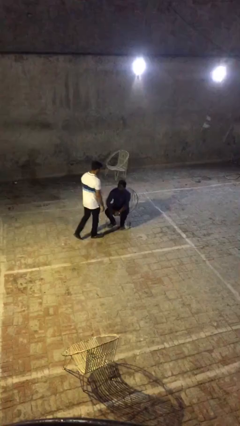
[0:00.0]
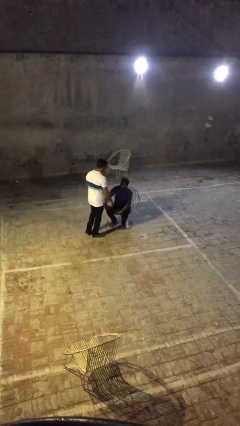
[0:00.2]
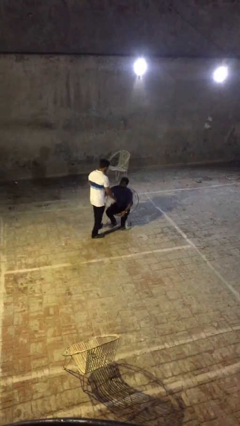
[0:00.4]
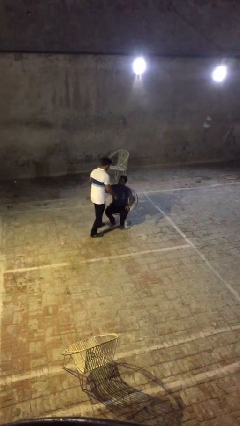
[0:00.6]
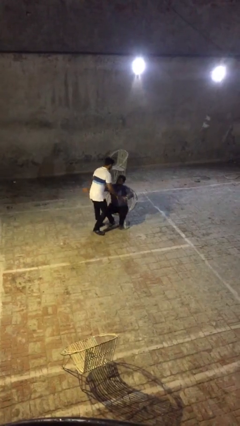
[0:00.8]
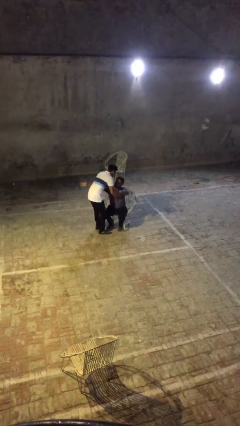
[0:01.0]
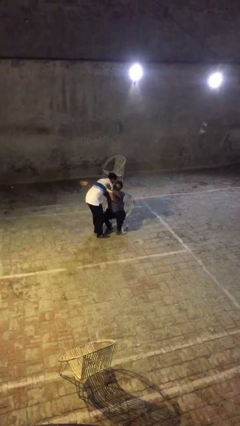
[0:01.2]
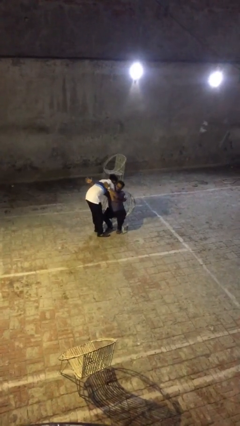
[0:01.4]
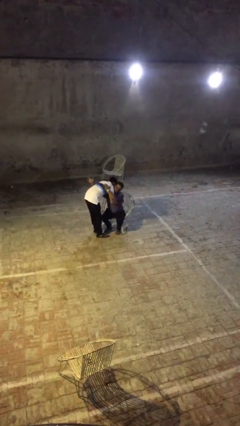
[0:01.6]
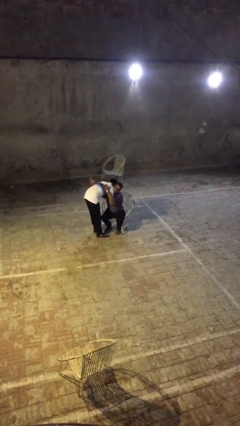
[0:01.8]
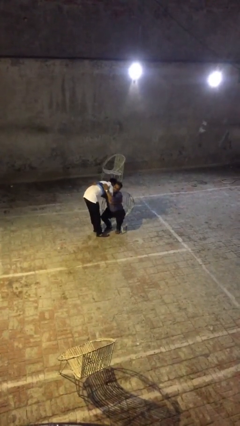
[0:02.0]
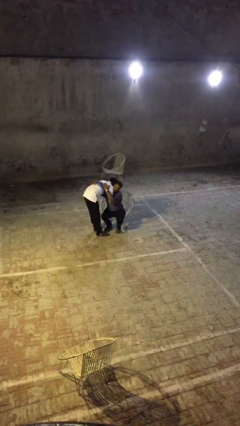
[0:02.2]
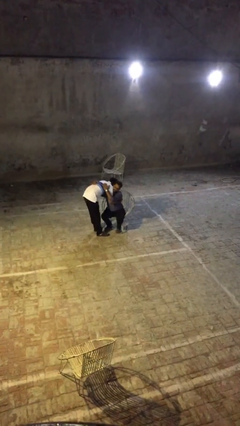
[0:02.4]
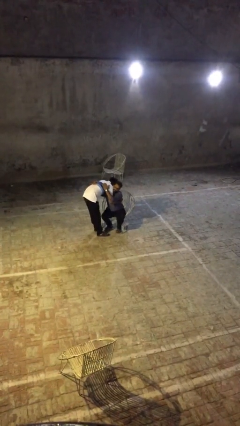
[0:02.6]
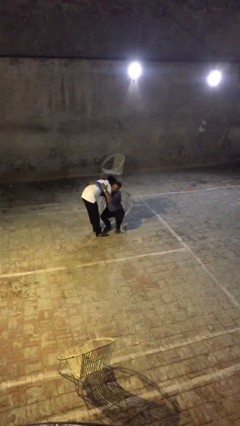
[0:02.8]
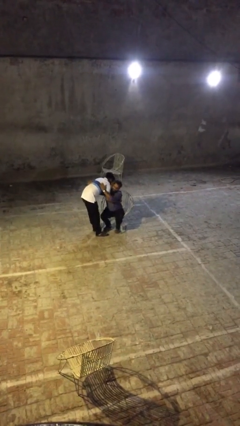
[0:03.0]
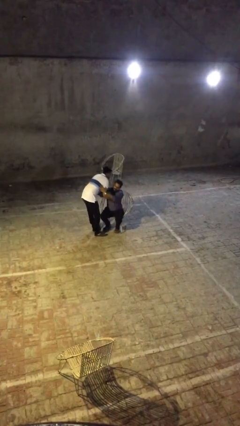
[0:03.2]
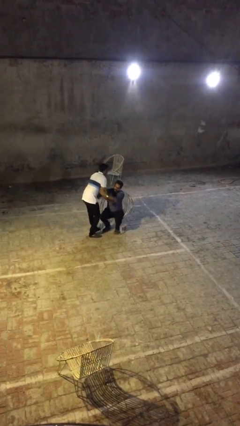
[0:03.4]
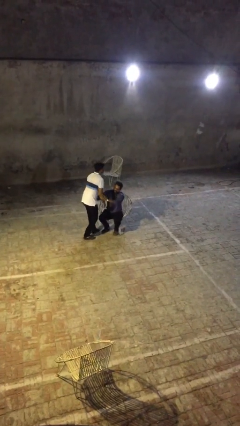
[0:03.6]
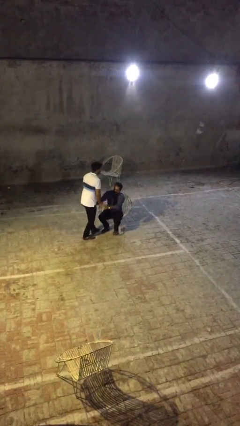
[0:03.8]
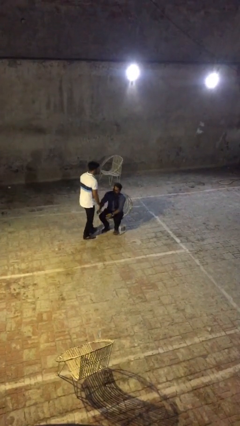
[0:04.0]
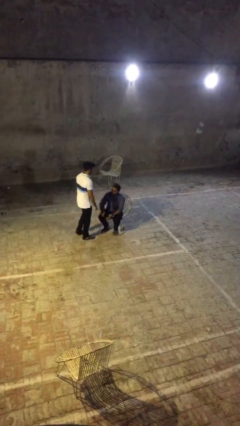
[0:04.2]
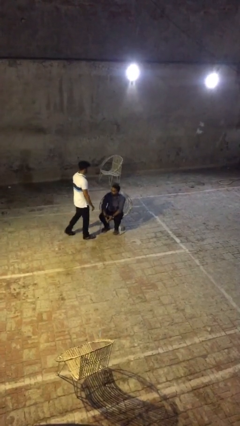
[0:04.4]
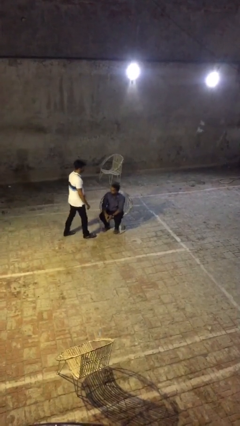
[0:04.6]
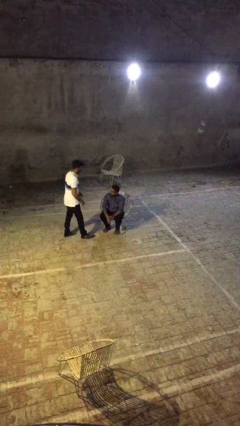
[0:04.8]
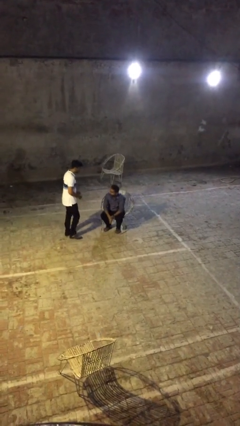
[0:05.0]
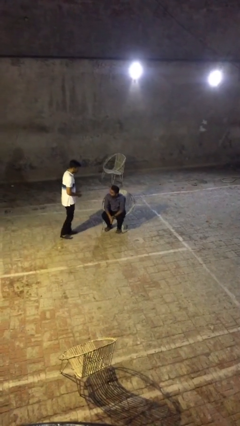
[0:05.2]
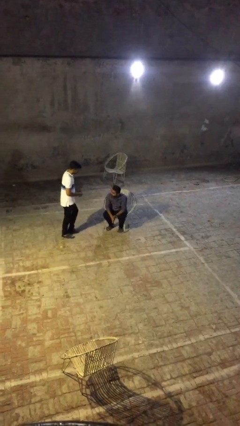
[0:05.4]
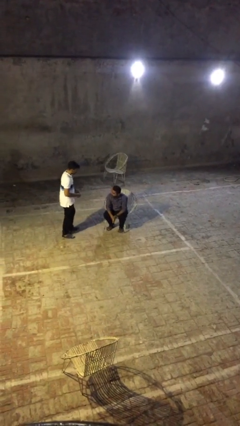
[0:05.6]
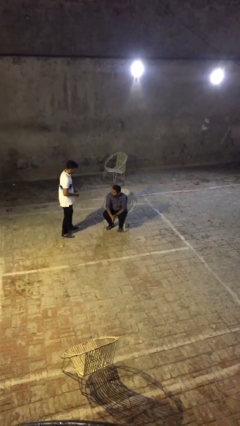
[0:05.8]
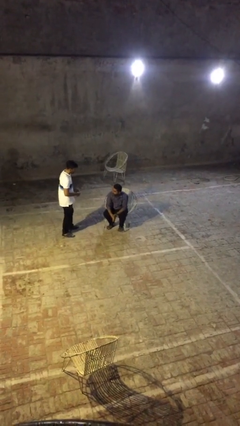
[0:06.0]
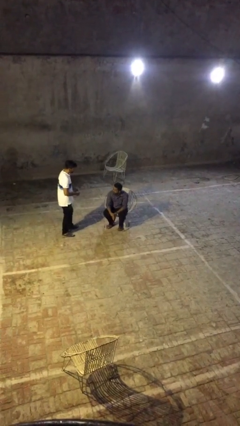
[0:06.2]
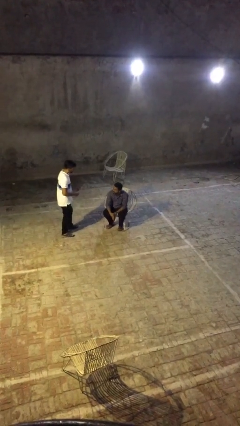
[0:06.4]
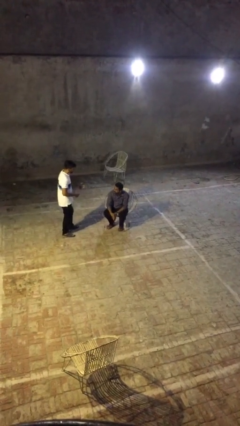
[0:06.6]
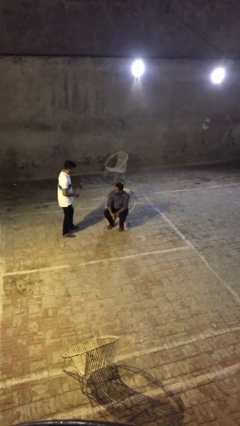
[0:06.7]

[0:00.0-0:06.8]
person embraces person

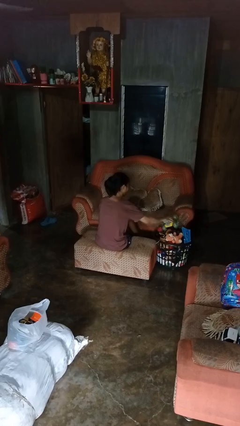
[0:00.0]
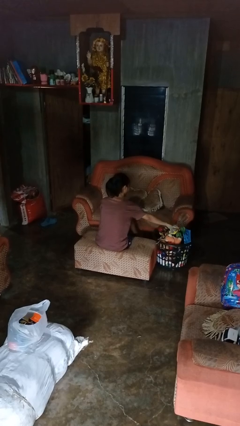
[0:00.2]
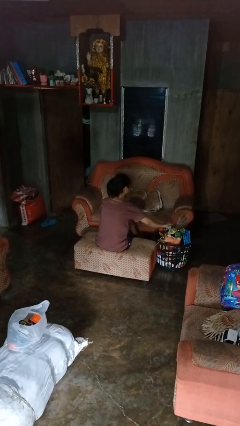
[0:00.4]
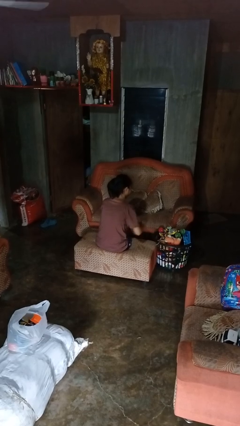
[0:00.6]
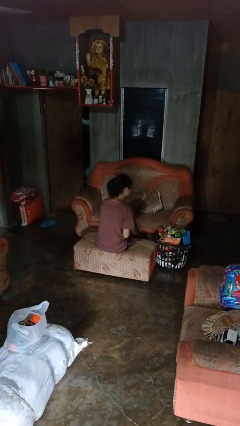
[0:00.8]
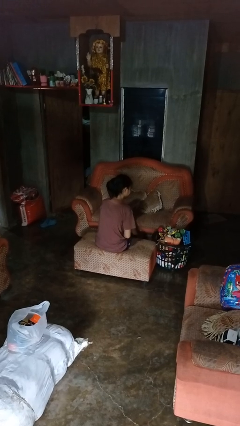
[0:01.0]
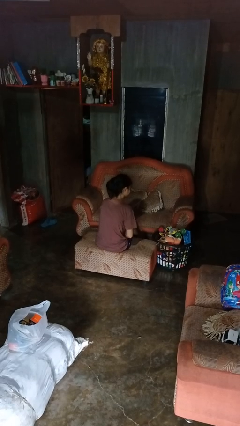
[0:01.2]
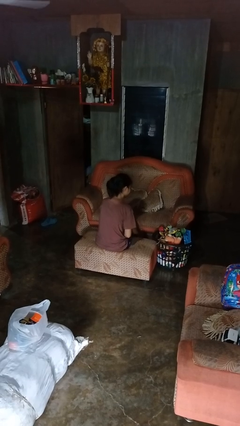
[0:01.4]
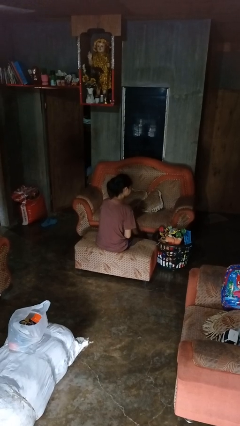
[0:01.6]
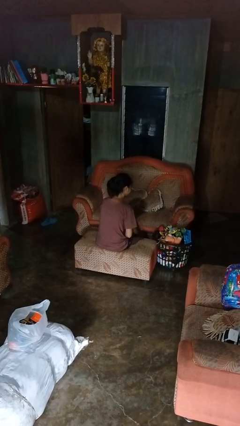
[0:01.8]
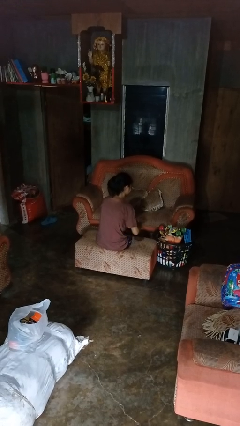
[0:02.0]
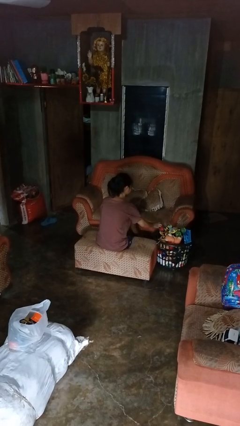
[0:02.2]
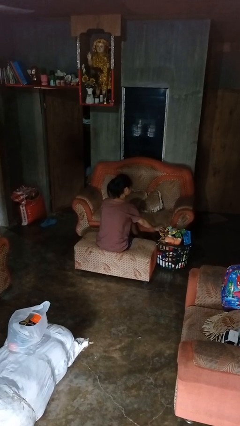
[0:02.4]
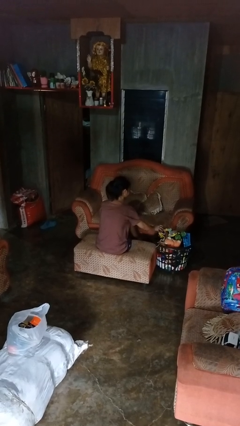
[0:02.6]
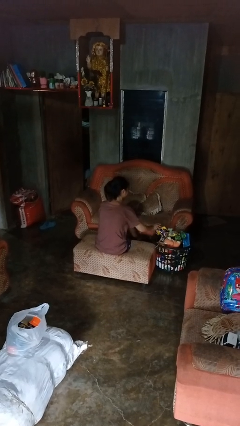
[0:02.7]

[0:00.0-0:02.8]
person puts object into basket

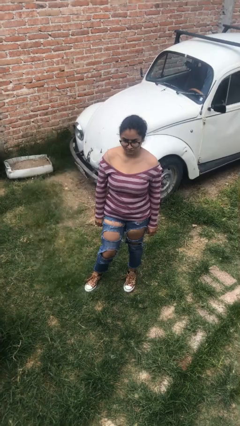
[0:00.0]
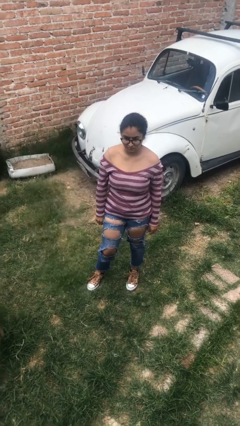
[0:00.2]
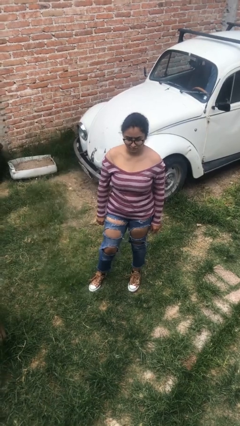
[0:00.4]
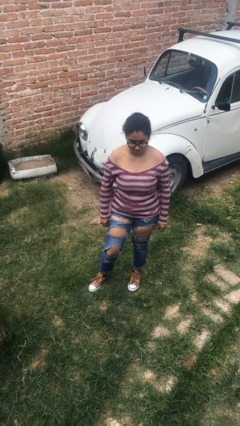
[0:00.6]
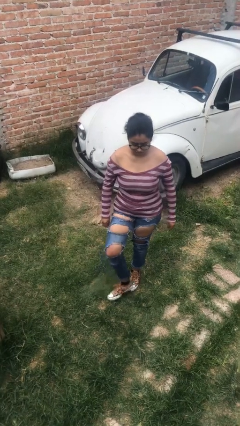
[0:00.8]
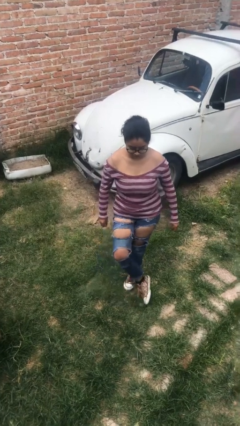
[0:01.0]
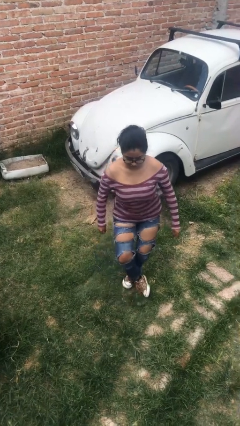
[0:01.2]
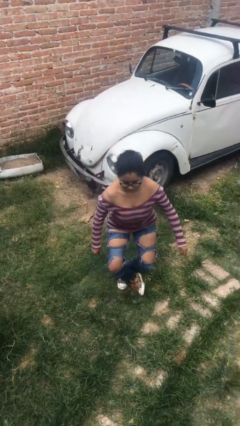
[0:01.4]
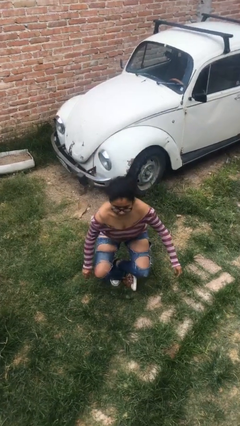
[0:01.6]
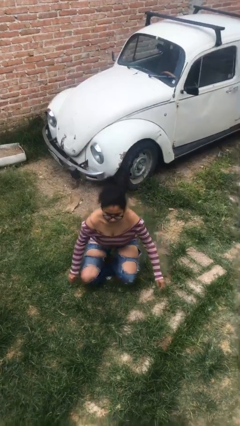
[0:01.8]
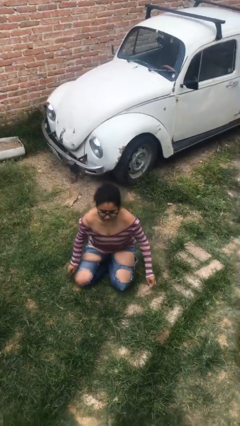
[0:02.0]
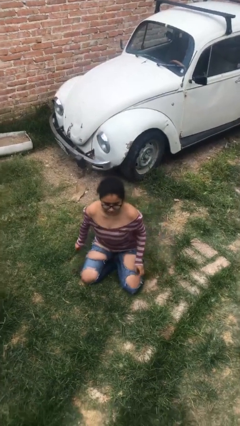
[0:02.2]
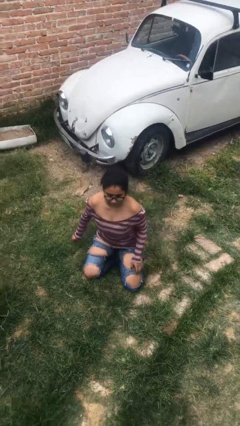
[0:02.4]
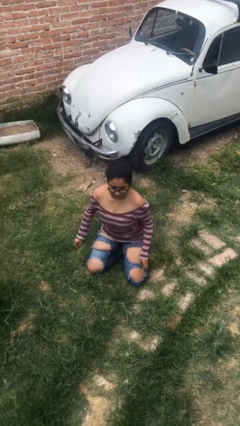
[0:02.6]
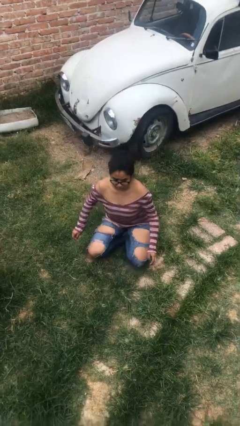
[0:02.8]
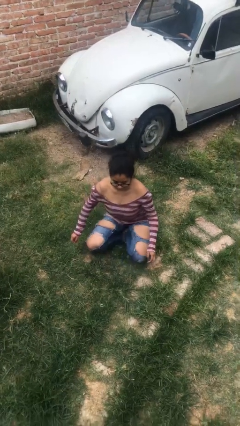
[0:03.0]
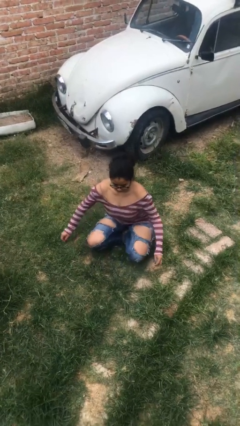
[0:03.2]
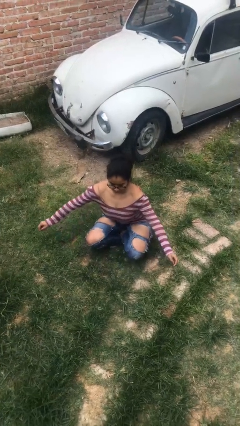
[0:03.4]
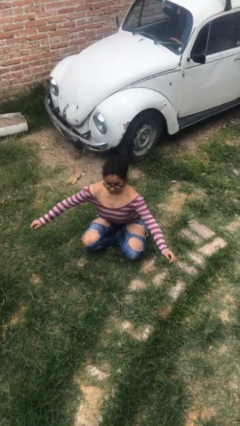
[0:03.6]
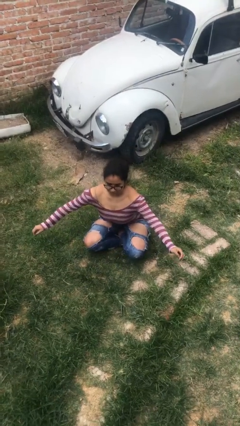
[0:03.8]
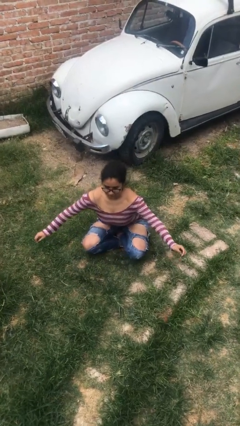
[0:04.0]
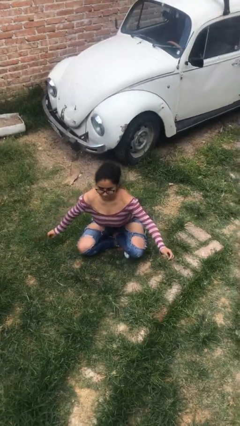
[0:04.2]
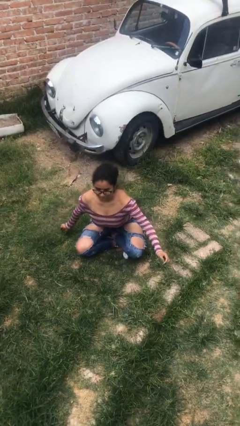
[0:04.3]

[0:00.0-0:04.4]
person sits crisscross

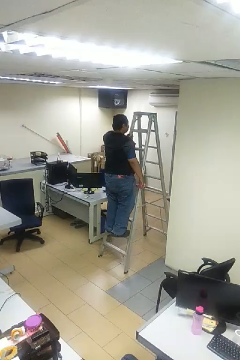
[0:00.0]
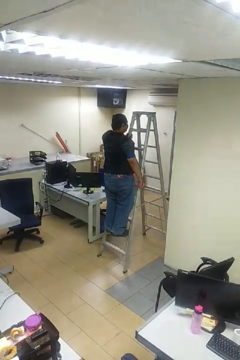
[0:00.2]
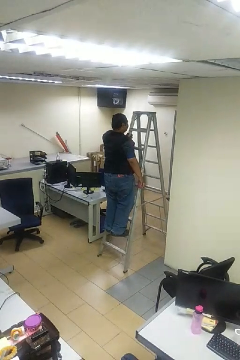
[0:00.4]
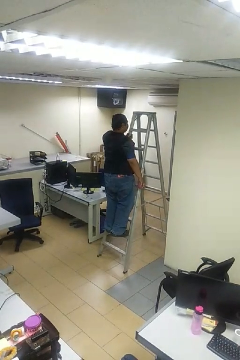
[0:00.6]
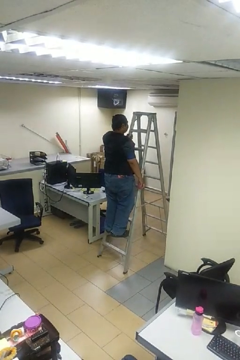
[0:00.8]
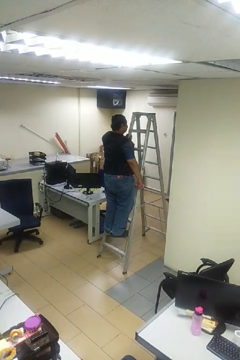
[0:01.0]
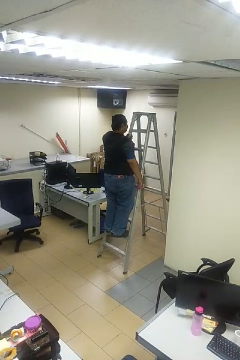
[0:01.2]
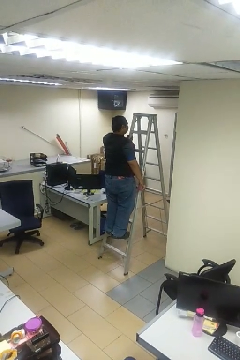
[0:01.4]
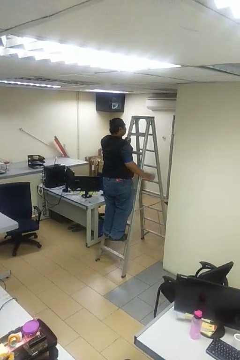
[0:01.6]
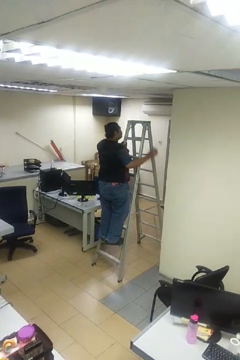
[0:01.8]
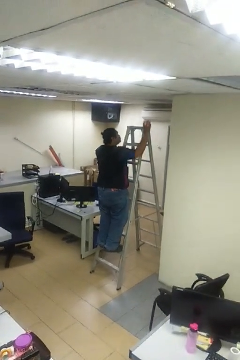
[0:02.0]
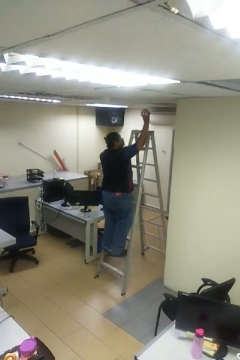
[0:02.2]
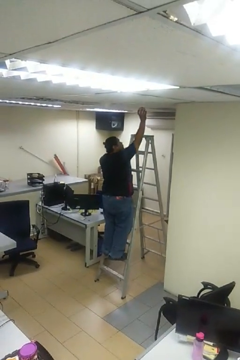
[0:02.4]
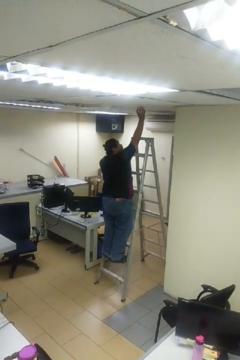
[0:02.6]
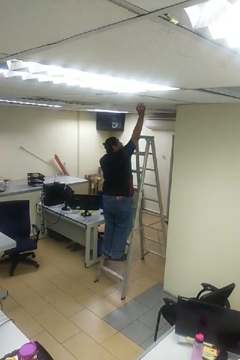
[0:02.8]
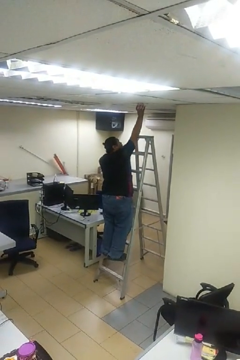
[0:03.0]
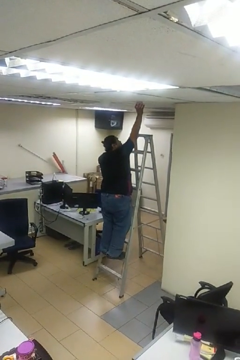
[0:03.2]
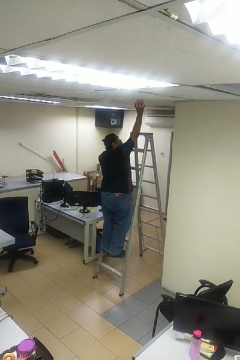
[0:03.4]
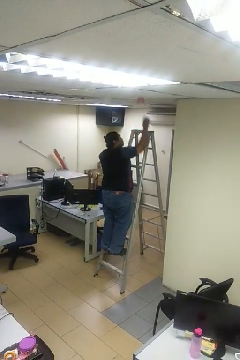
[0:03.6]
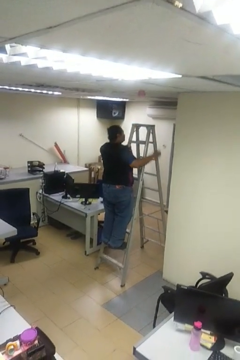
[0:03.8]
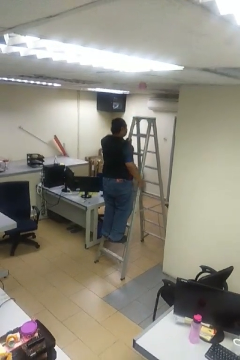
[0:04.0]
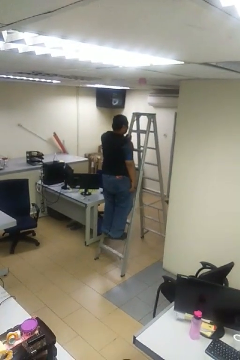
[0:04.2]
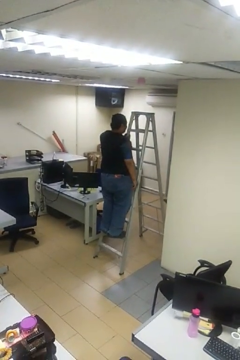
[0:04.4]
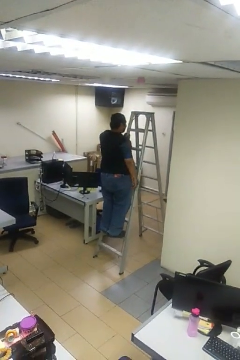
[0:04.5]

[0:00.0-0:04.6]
person puts up smoke detector
